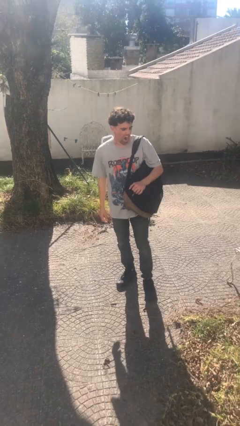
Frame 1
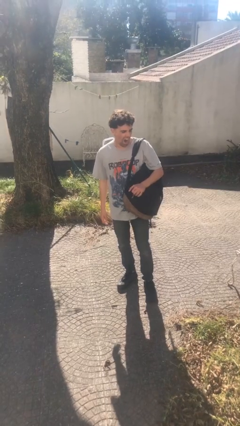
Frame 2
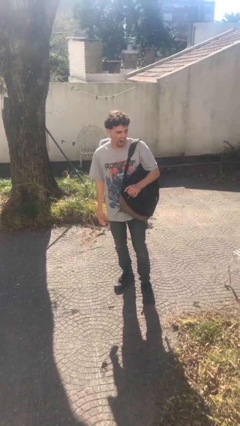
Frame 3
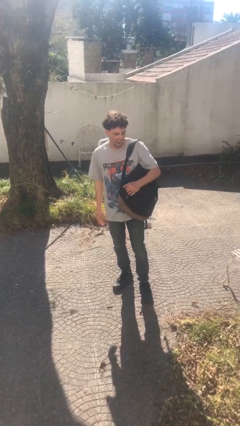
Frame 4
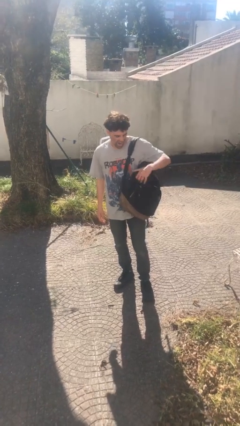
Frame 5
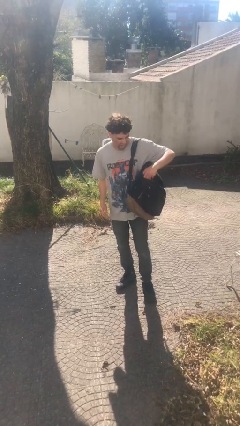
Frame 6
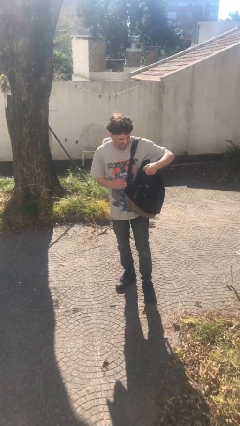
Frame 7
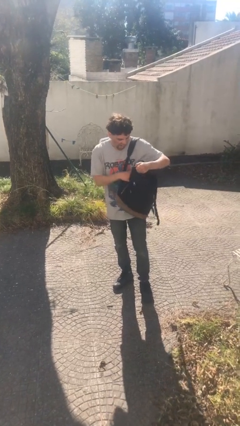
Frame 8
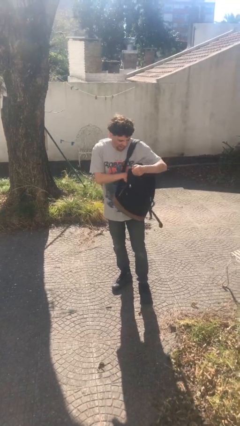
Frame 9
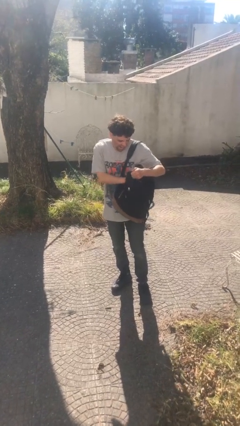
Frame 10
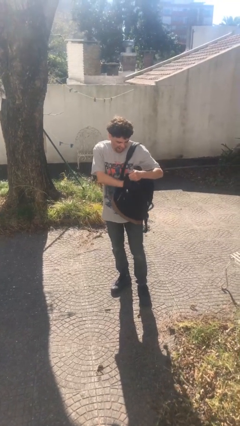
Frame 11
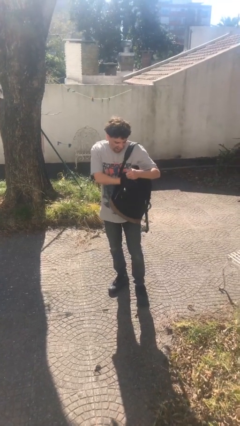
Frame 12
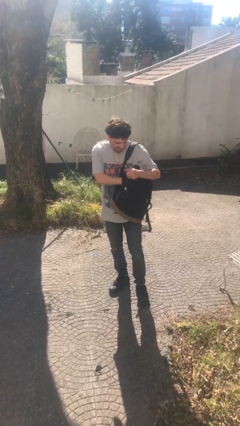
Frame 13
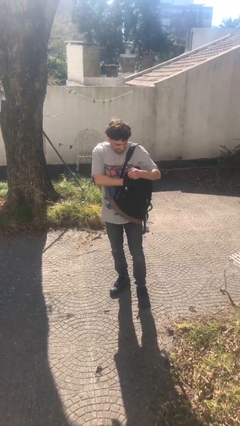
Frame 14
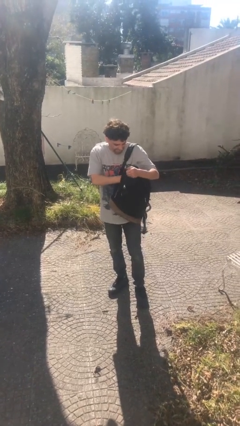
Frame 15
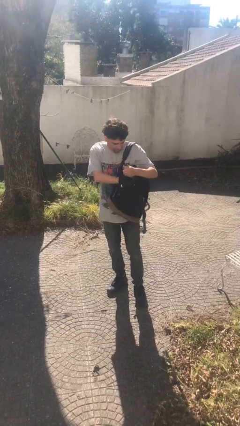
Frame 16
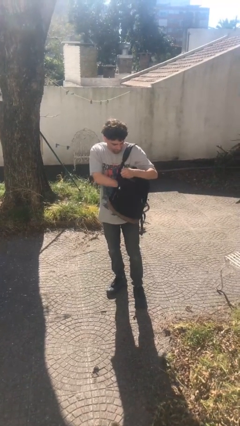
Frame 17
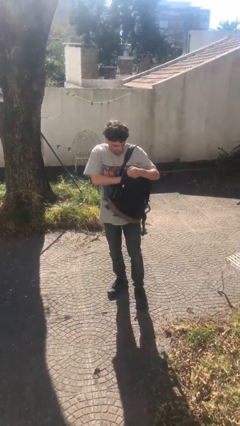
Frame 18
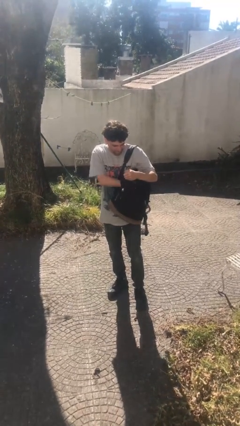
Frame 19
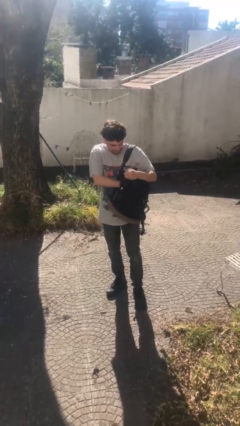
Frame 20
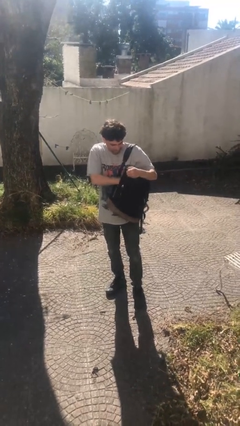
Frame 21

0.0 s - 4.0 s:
person searches in backpack

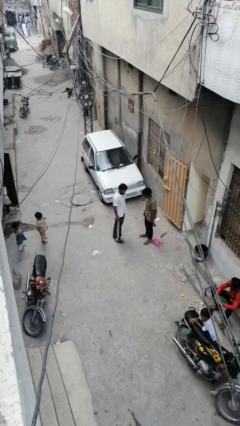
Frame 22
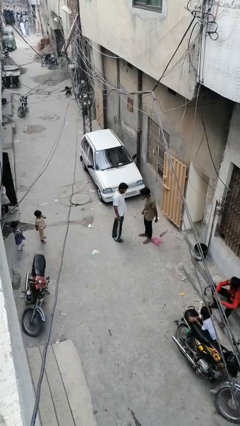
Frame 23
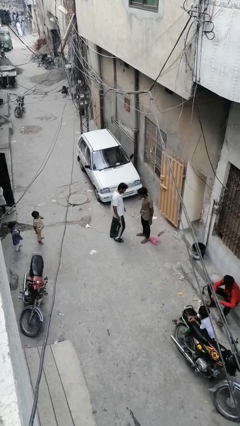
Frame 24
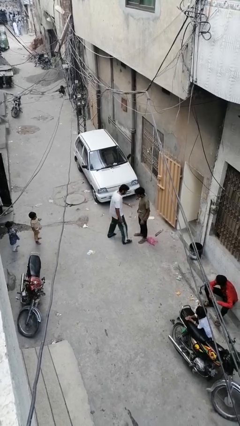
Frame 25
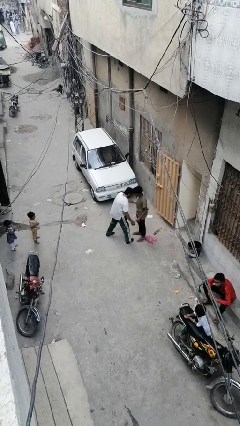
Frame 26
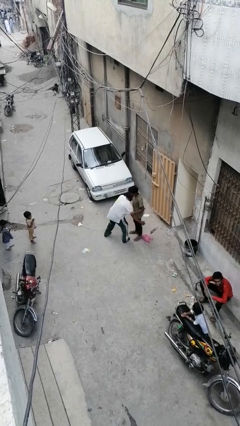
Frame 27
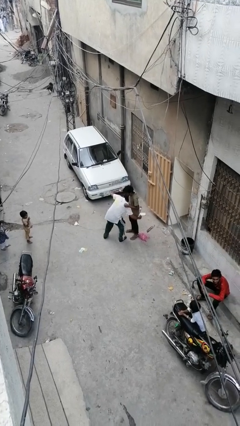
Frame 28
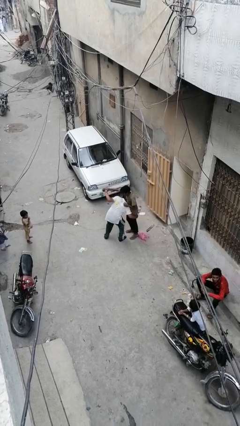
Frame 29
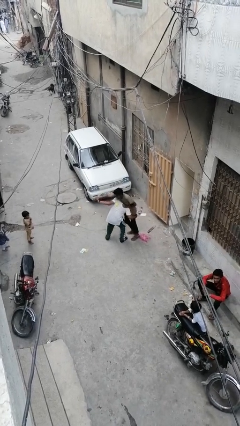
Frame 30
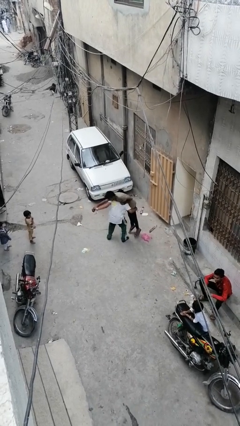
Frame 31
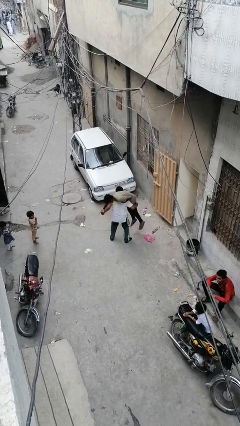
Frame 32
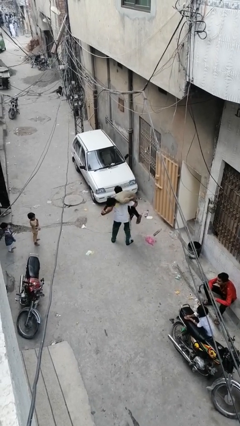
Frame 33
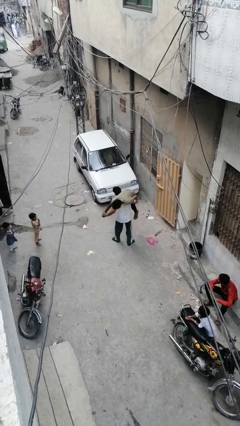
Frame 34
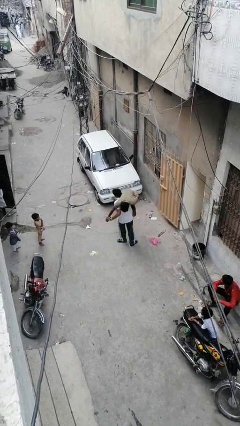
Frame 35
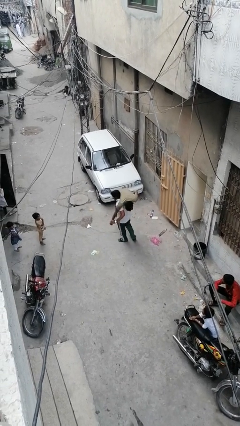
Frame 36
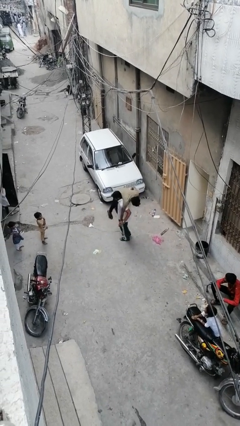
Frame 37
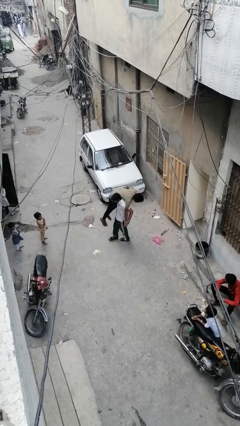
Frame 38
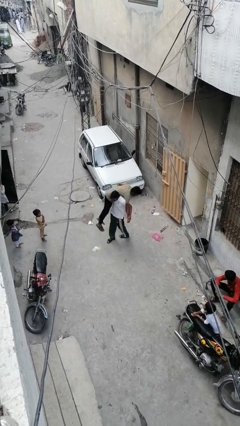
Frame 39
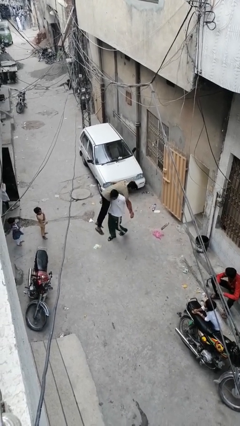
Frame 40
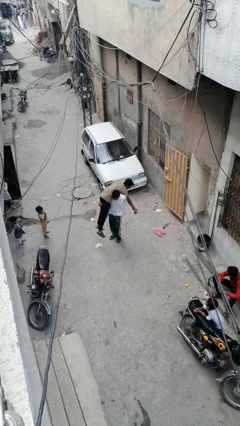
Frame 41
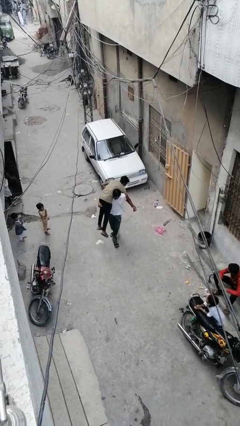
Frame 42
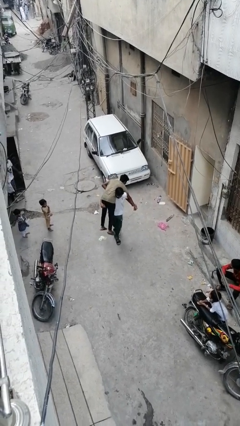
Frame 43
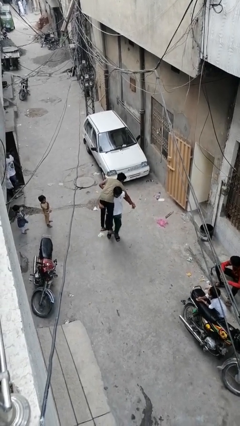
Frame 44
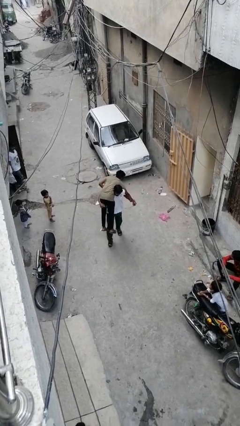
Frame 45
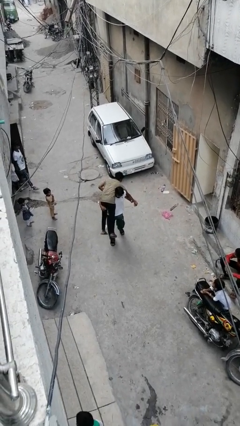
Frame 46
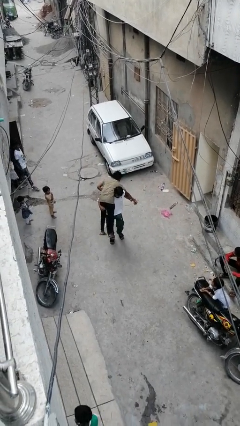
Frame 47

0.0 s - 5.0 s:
person carries person over shoulder

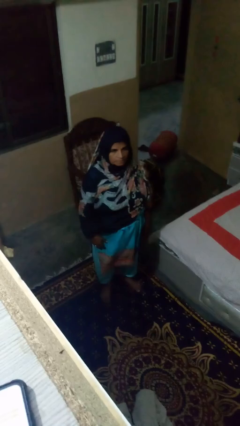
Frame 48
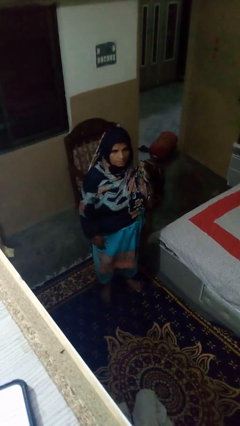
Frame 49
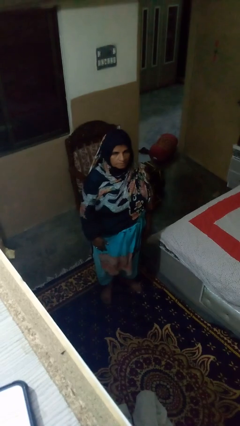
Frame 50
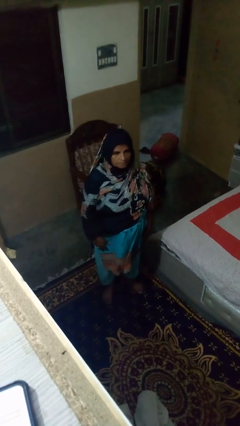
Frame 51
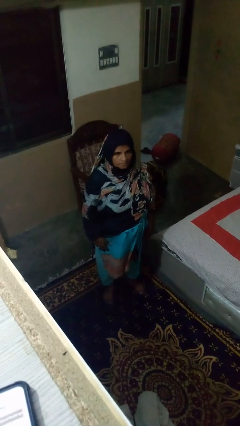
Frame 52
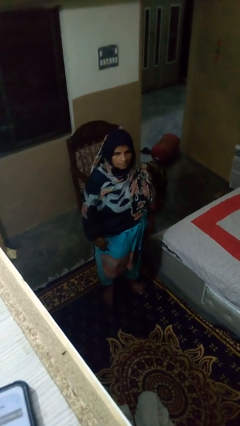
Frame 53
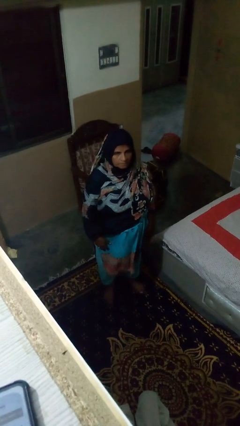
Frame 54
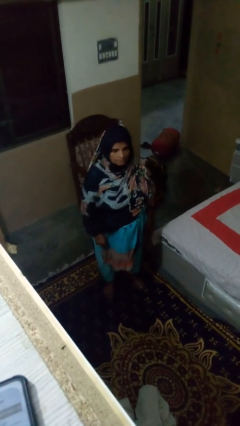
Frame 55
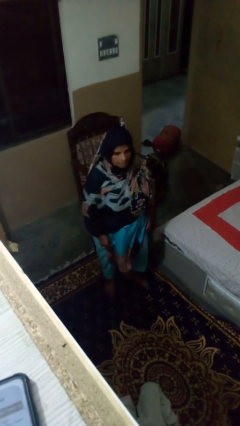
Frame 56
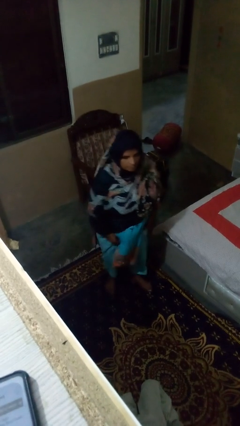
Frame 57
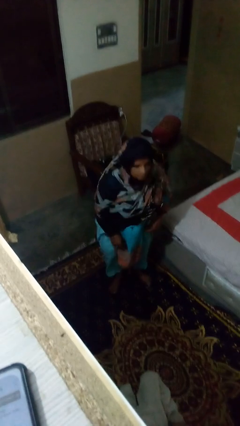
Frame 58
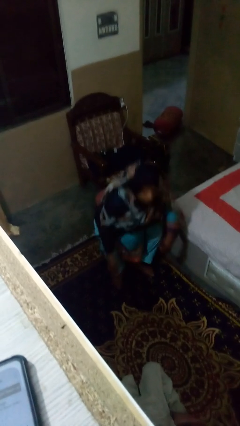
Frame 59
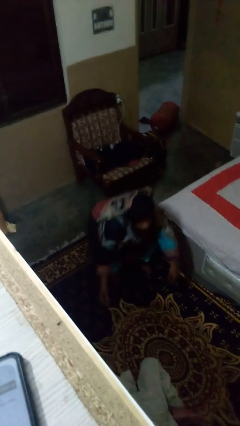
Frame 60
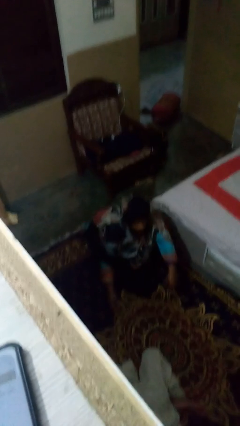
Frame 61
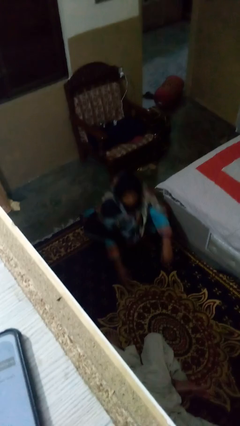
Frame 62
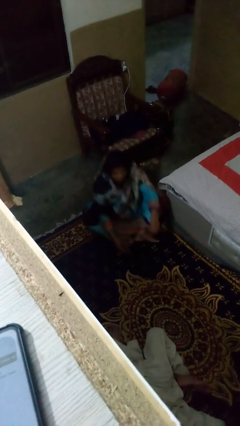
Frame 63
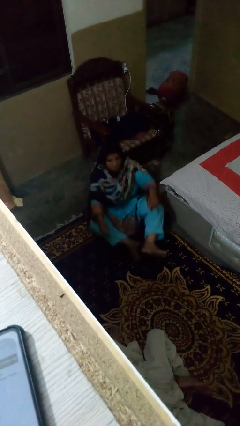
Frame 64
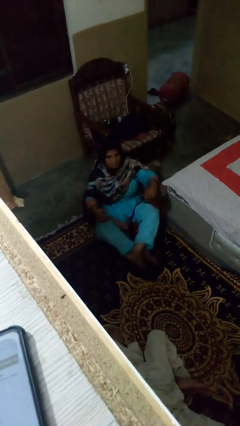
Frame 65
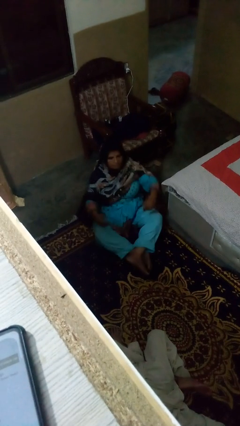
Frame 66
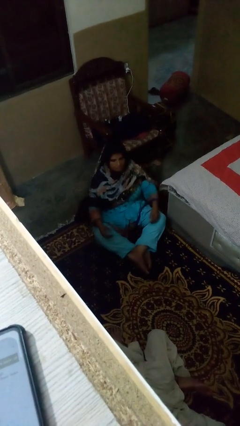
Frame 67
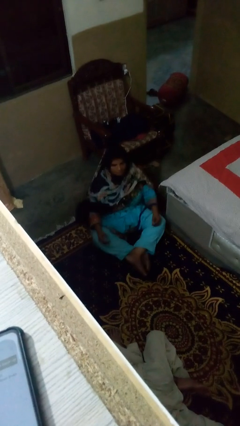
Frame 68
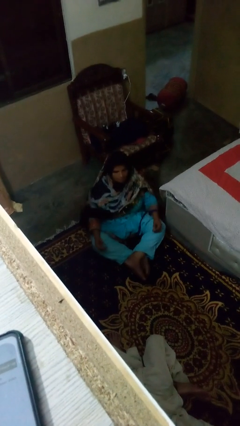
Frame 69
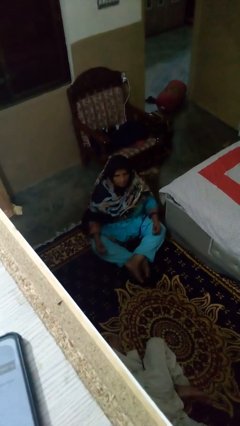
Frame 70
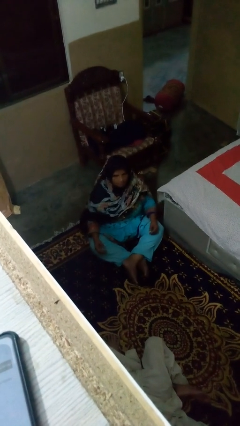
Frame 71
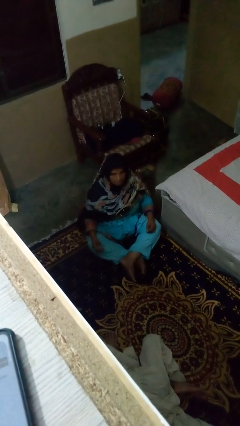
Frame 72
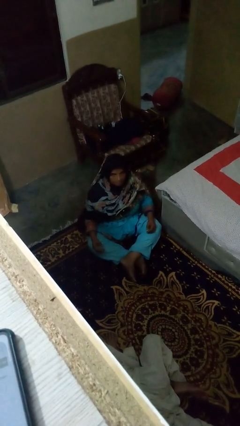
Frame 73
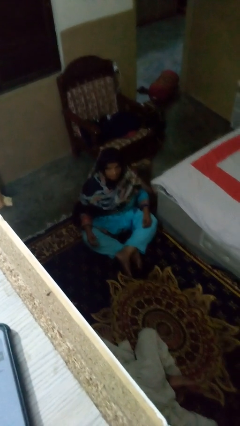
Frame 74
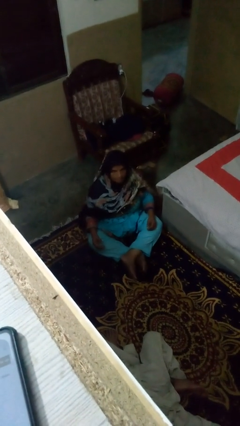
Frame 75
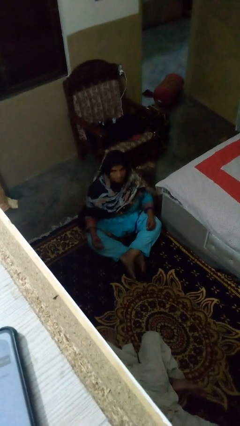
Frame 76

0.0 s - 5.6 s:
person sits crisscross

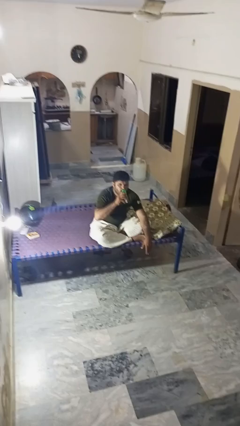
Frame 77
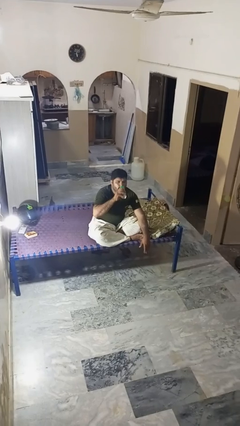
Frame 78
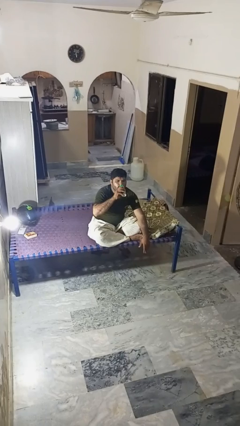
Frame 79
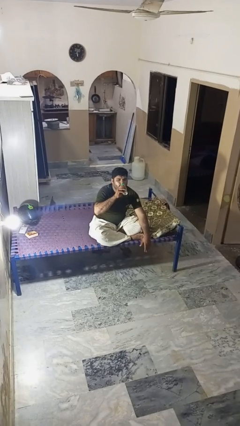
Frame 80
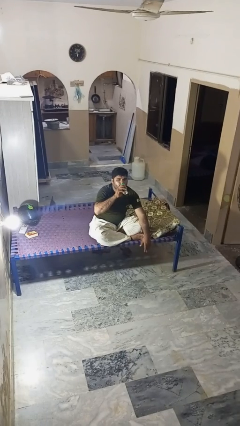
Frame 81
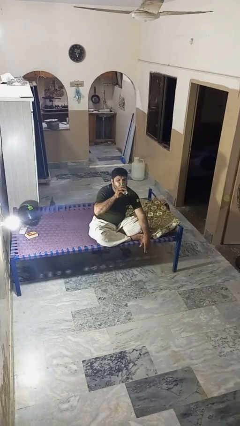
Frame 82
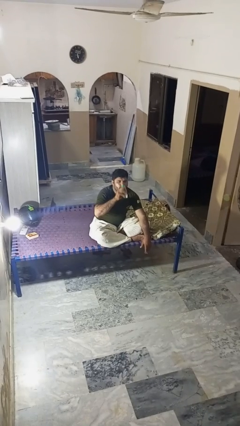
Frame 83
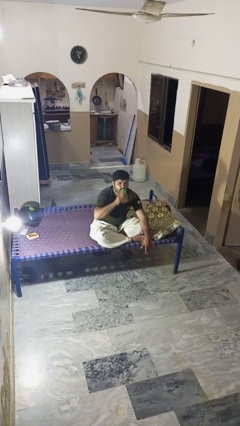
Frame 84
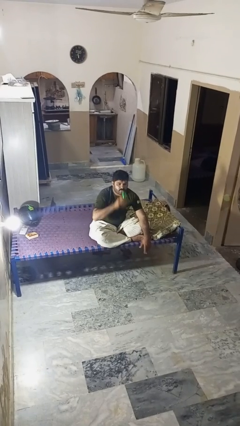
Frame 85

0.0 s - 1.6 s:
person drinks from beverage can

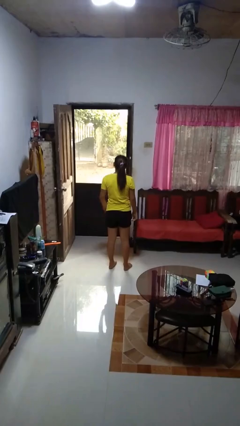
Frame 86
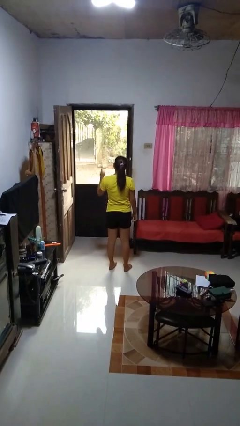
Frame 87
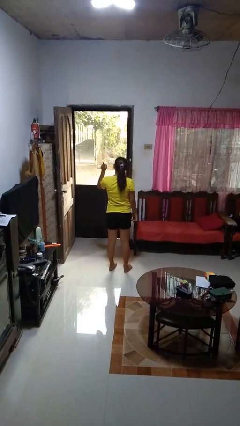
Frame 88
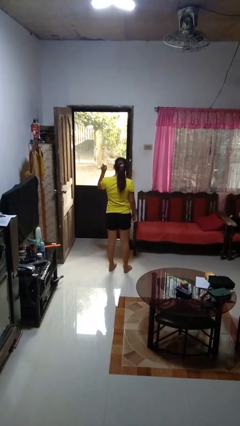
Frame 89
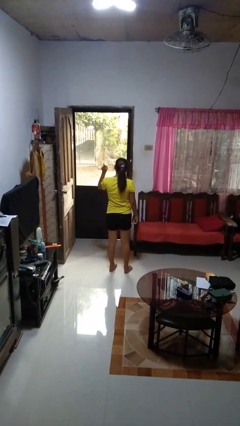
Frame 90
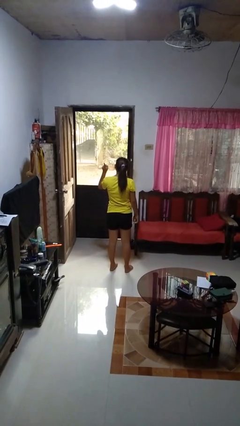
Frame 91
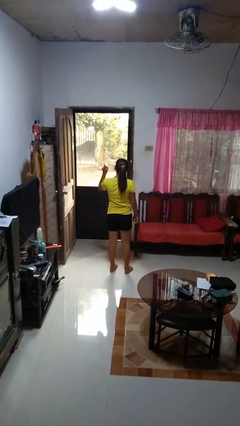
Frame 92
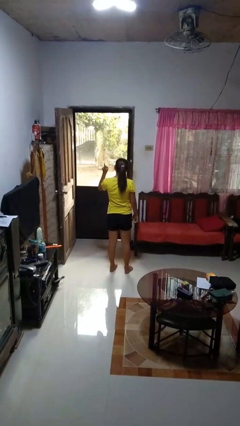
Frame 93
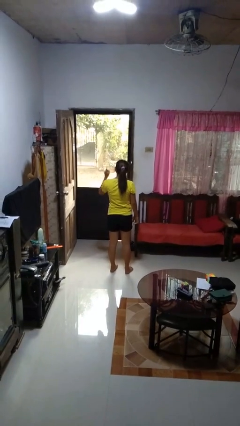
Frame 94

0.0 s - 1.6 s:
person gestures number one
